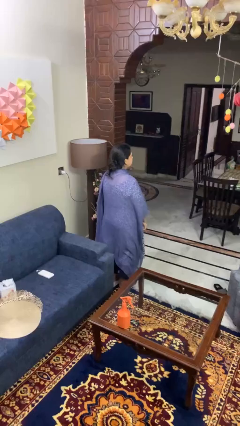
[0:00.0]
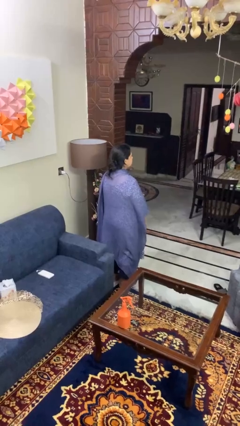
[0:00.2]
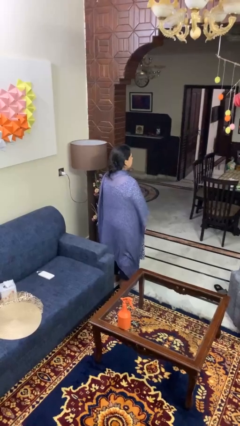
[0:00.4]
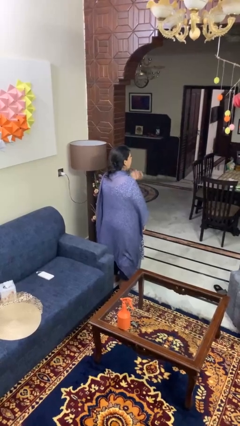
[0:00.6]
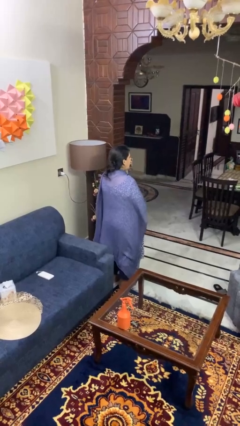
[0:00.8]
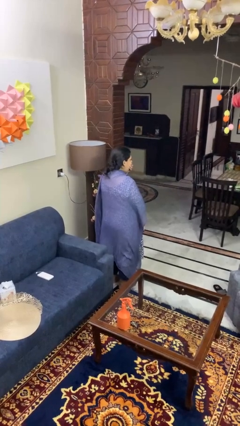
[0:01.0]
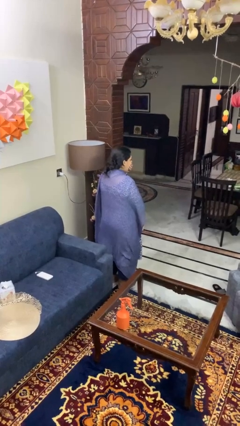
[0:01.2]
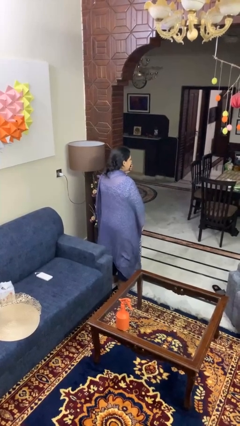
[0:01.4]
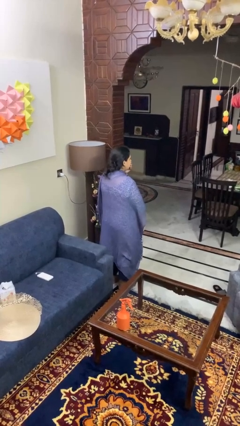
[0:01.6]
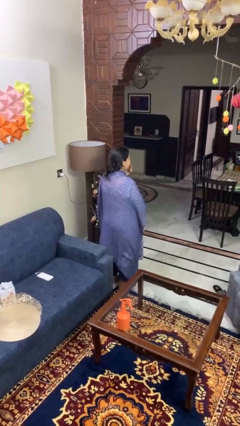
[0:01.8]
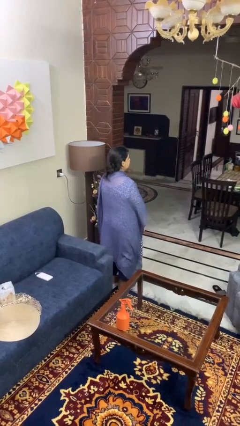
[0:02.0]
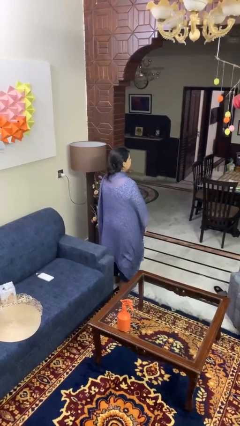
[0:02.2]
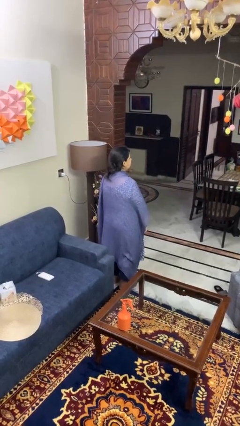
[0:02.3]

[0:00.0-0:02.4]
person yawns

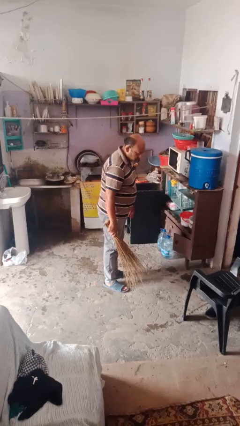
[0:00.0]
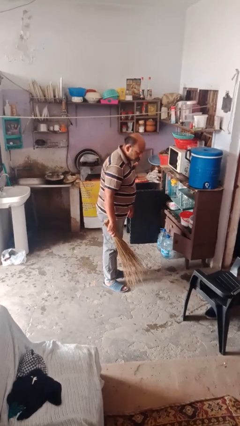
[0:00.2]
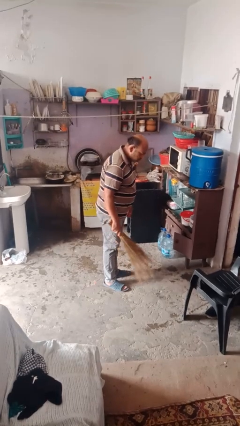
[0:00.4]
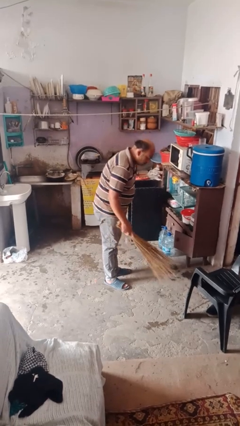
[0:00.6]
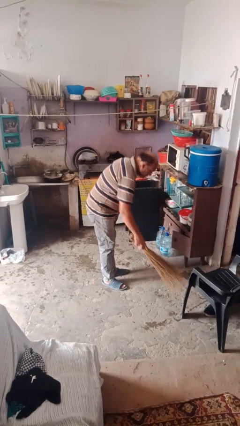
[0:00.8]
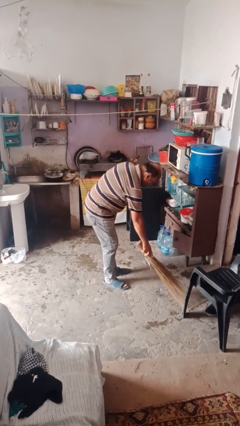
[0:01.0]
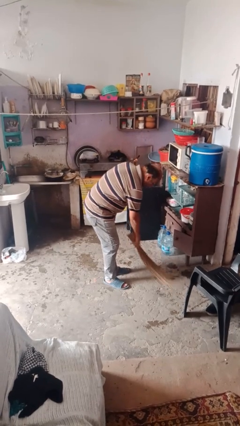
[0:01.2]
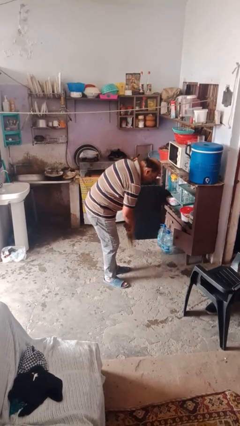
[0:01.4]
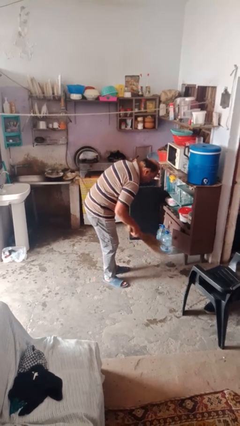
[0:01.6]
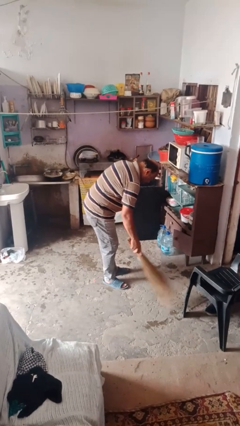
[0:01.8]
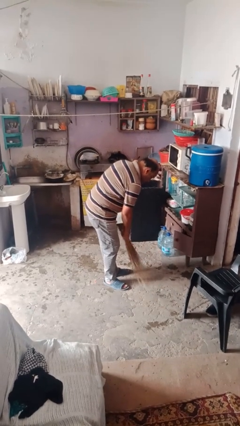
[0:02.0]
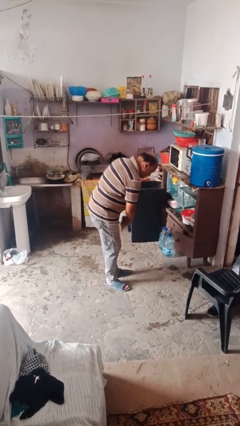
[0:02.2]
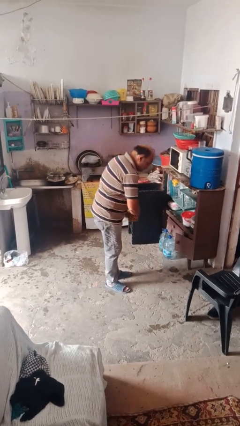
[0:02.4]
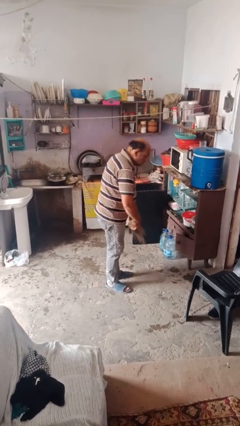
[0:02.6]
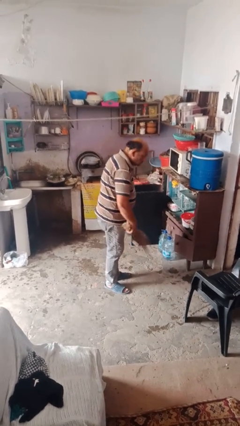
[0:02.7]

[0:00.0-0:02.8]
person sweeps floor

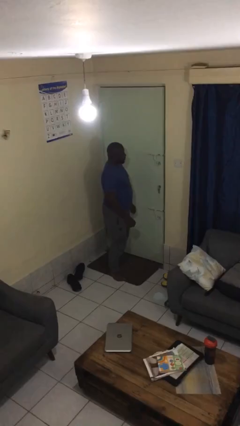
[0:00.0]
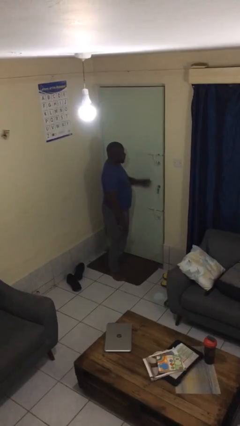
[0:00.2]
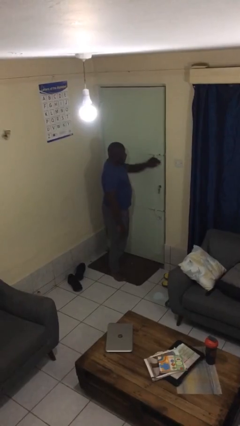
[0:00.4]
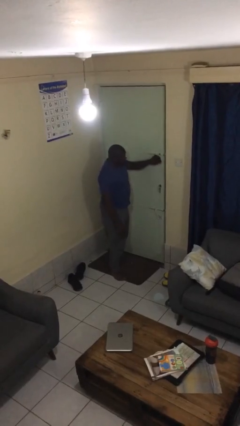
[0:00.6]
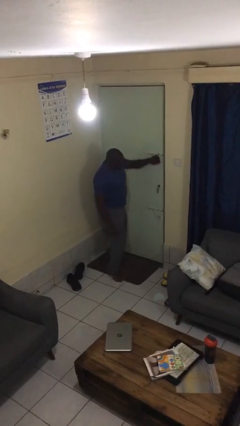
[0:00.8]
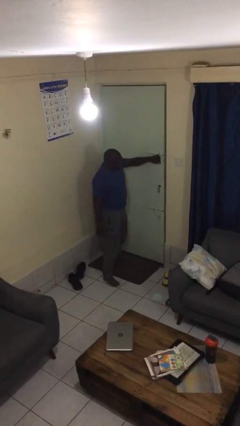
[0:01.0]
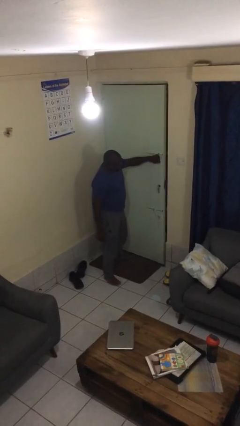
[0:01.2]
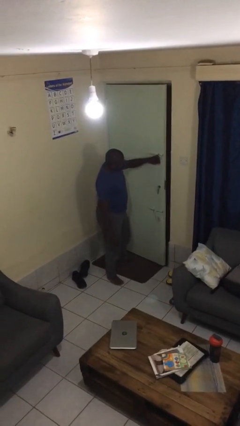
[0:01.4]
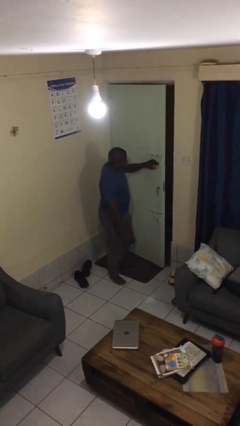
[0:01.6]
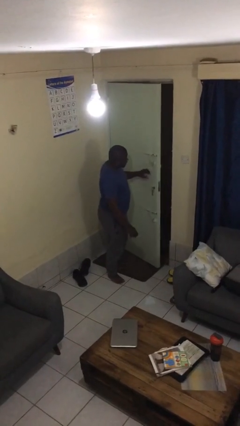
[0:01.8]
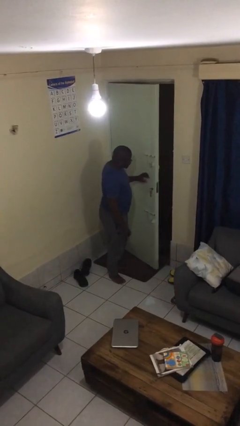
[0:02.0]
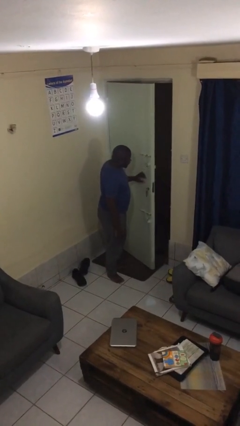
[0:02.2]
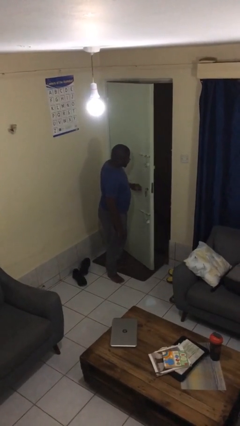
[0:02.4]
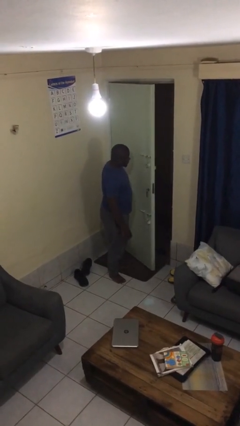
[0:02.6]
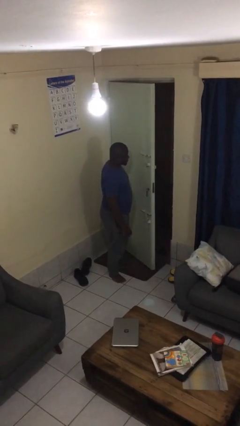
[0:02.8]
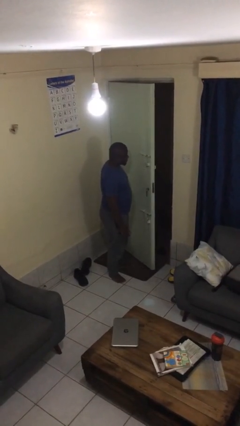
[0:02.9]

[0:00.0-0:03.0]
person opens facility door

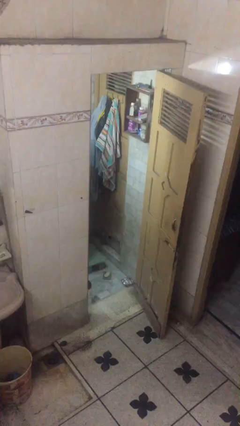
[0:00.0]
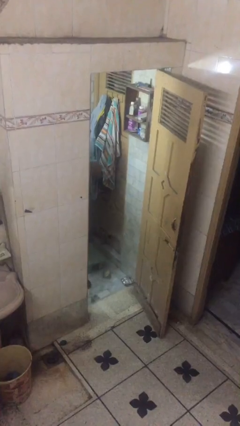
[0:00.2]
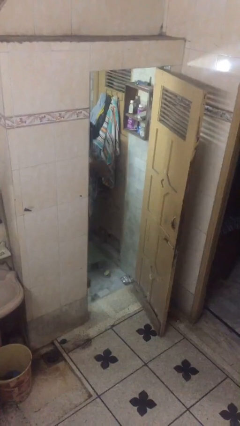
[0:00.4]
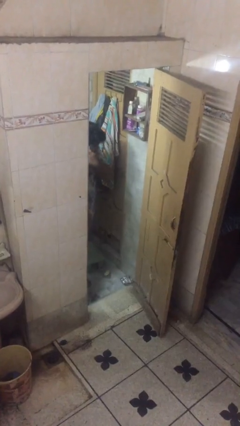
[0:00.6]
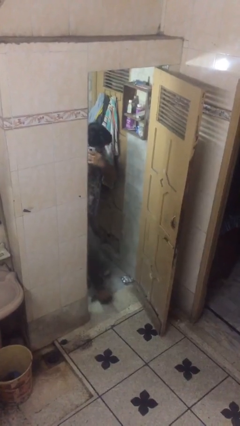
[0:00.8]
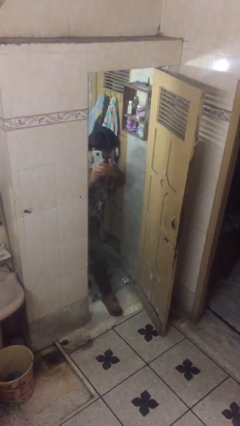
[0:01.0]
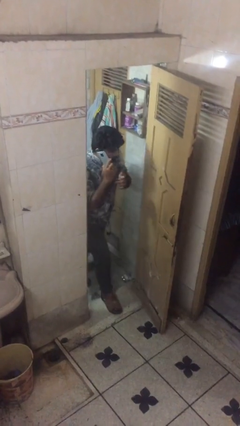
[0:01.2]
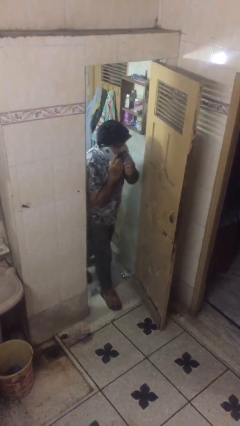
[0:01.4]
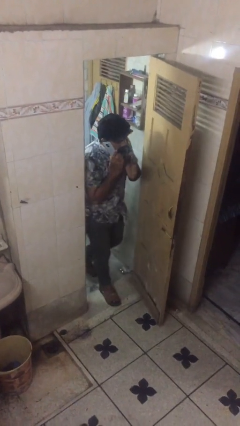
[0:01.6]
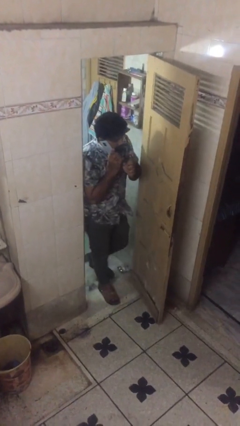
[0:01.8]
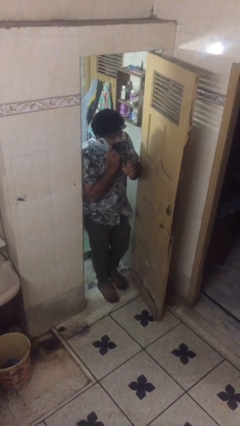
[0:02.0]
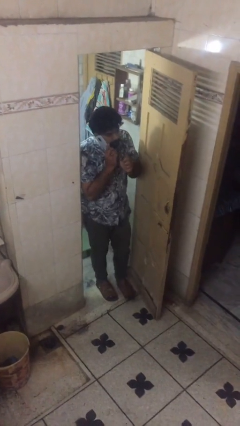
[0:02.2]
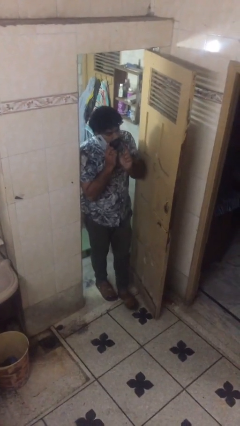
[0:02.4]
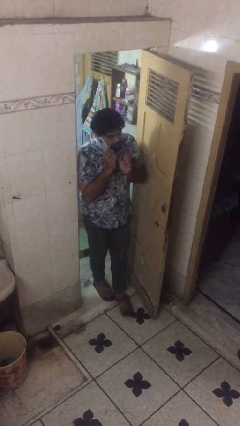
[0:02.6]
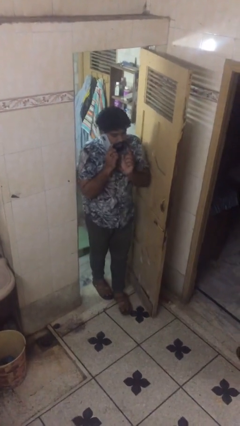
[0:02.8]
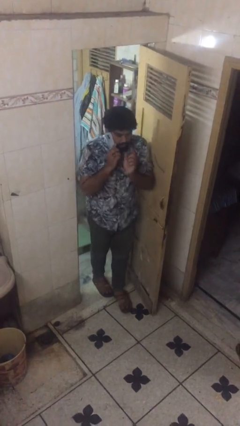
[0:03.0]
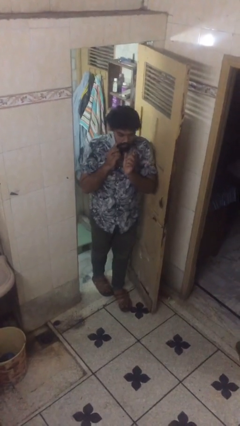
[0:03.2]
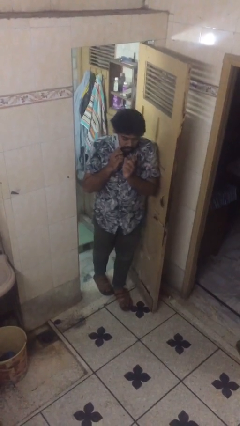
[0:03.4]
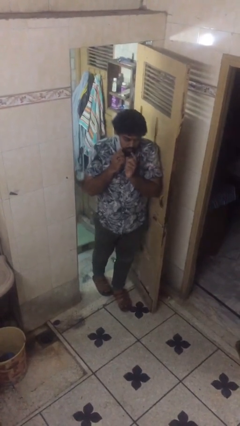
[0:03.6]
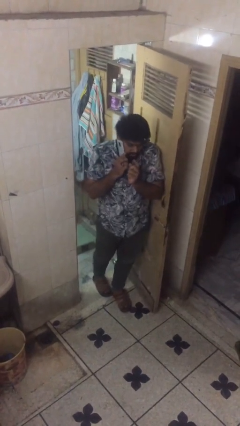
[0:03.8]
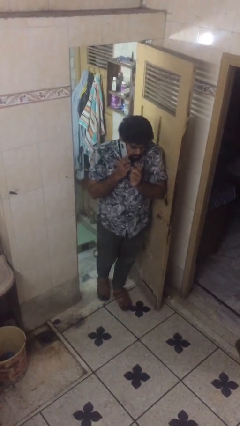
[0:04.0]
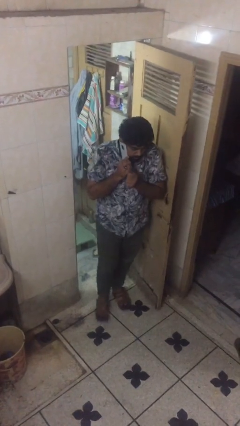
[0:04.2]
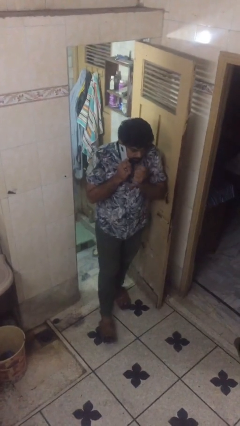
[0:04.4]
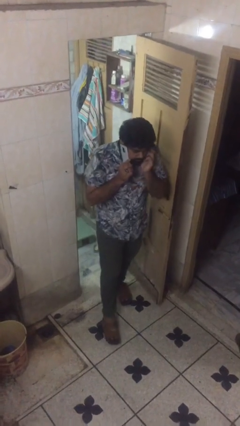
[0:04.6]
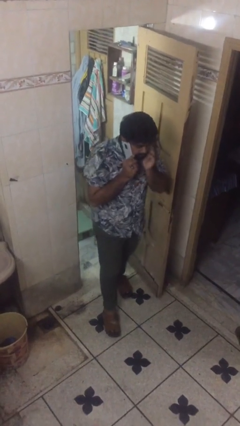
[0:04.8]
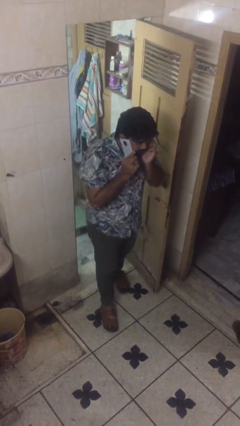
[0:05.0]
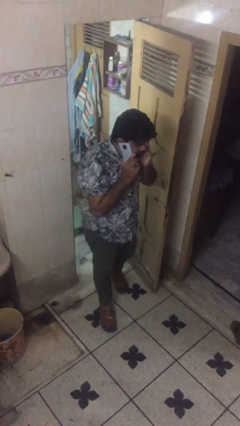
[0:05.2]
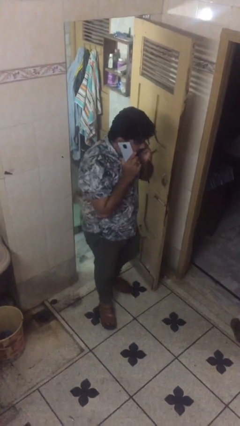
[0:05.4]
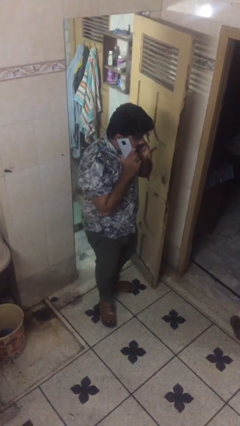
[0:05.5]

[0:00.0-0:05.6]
person enters scene through structure

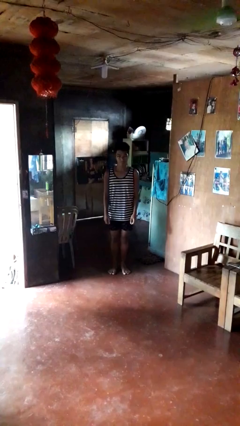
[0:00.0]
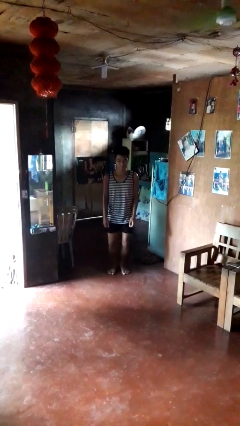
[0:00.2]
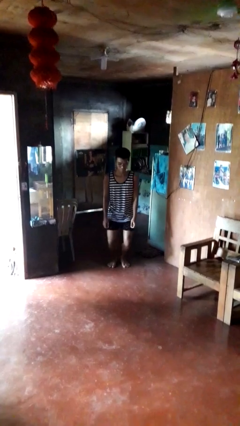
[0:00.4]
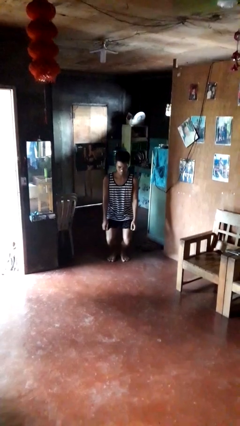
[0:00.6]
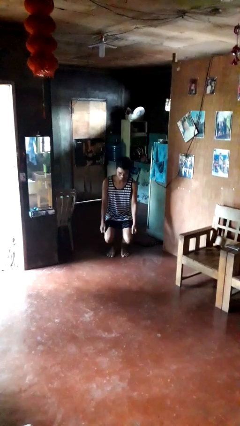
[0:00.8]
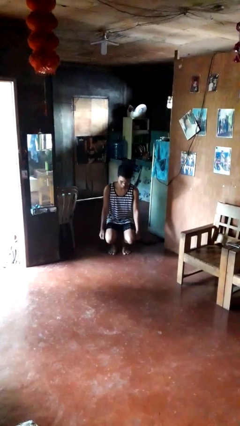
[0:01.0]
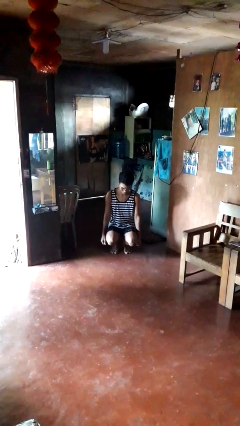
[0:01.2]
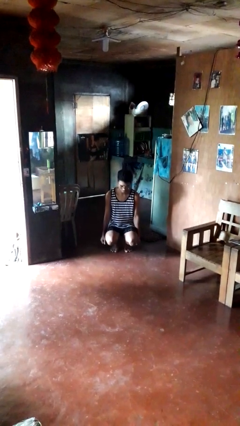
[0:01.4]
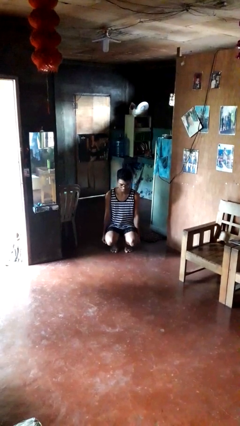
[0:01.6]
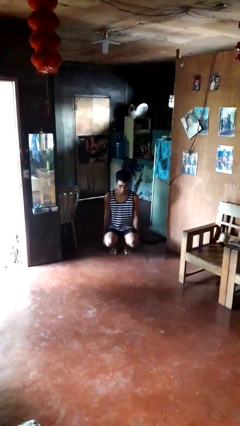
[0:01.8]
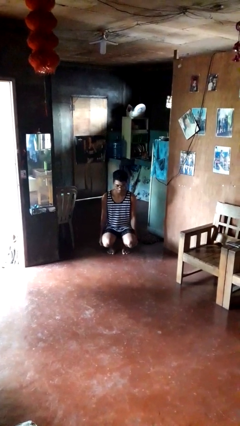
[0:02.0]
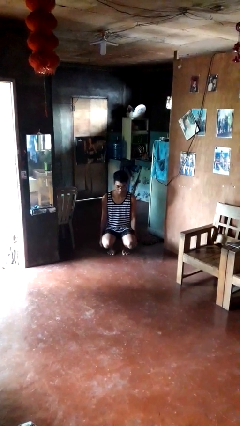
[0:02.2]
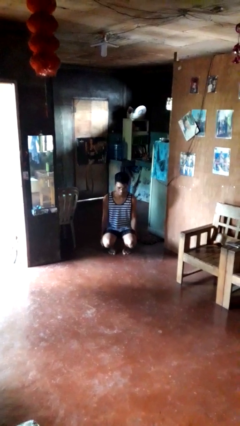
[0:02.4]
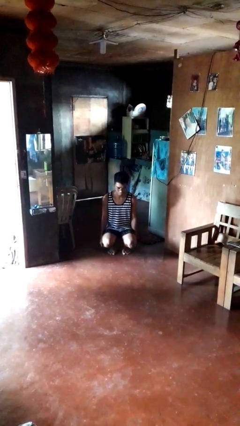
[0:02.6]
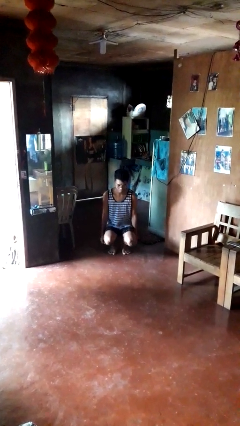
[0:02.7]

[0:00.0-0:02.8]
person squats

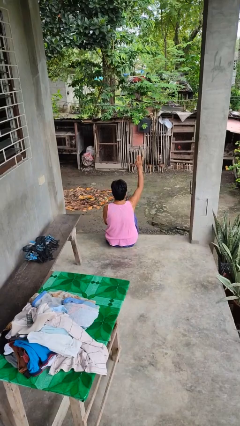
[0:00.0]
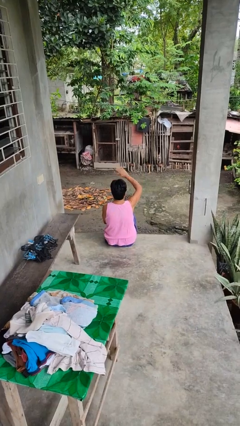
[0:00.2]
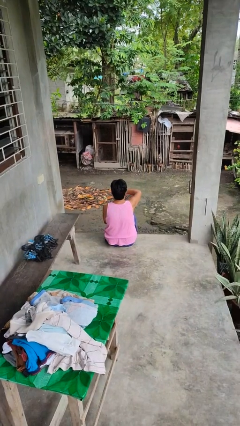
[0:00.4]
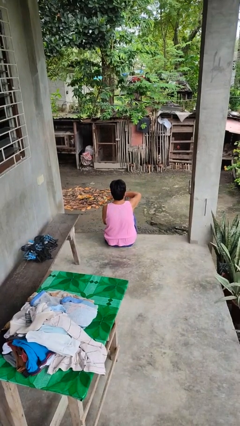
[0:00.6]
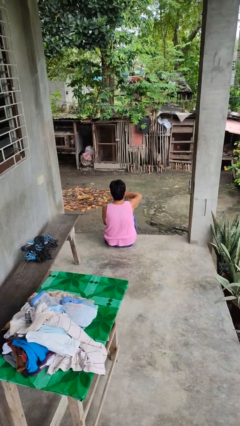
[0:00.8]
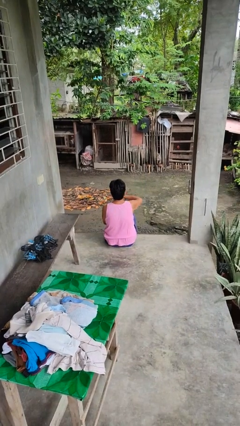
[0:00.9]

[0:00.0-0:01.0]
person gestures swipe down
